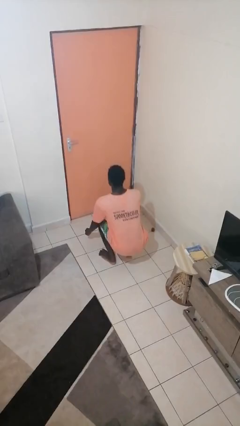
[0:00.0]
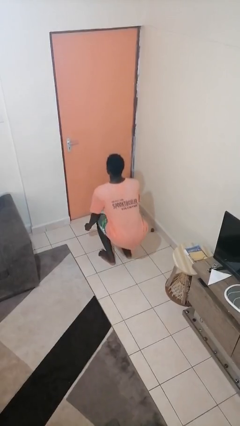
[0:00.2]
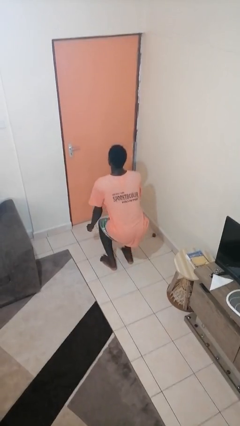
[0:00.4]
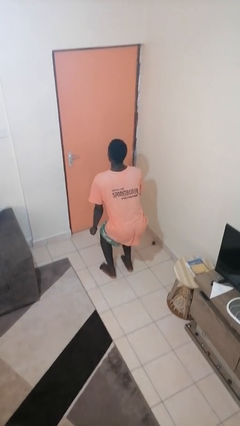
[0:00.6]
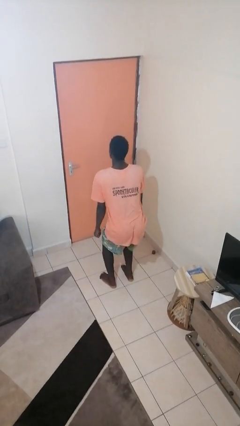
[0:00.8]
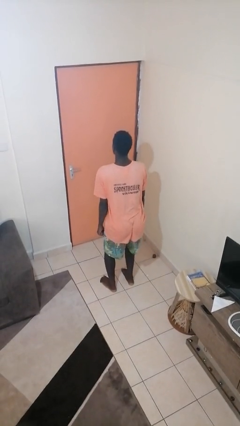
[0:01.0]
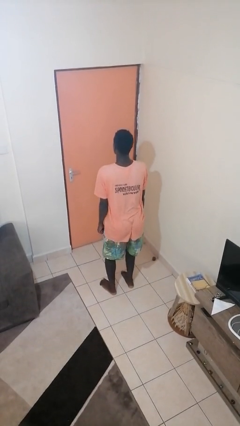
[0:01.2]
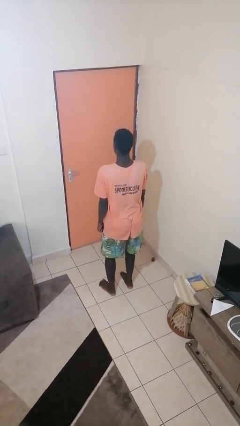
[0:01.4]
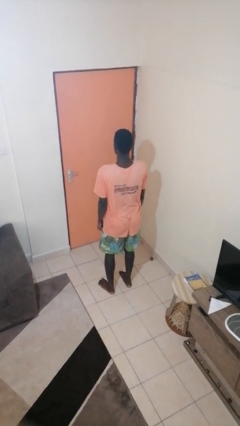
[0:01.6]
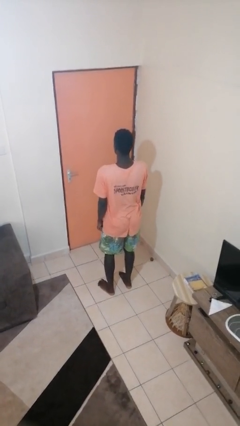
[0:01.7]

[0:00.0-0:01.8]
person stands up

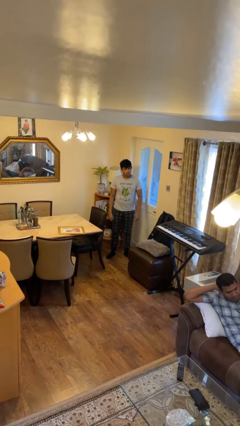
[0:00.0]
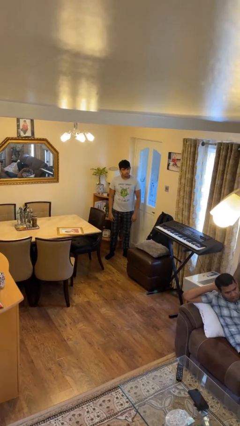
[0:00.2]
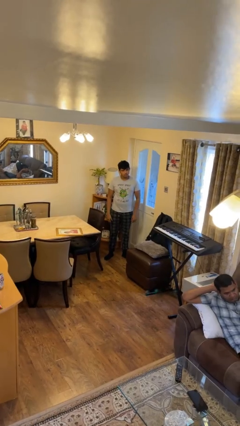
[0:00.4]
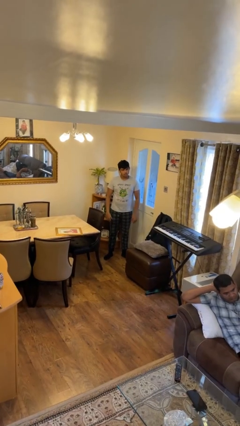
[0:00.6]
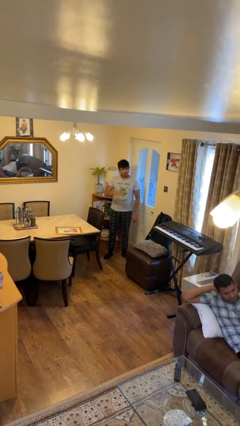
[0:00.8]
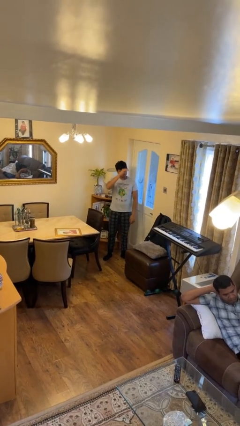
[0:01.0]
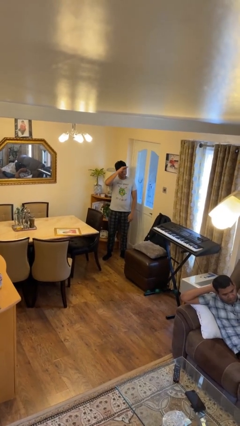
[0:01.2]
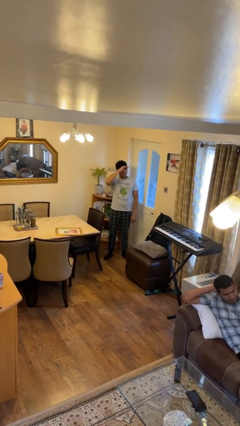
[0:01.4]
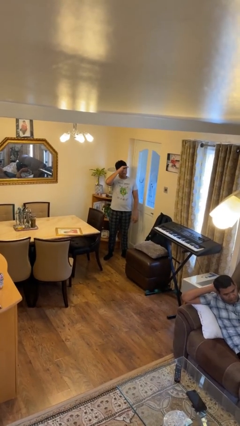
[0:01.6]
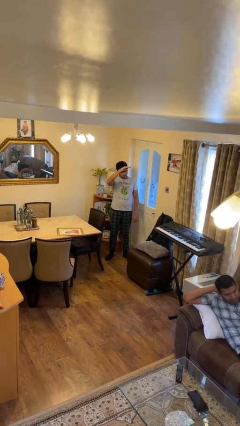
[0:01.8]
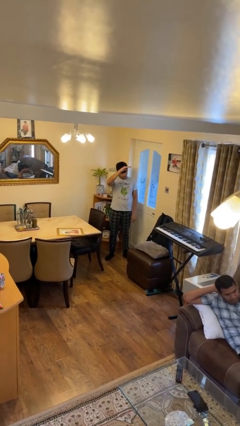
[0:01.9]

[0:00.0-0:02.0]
person salutes

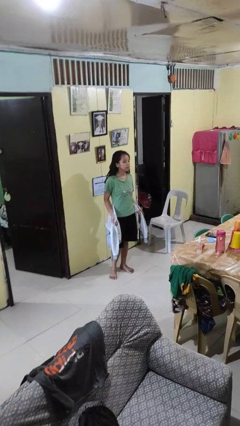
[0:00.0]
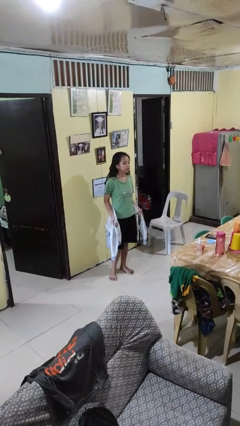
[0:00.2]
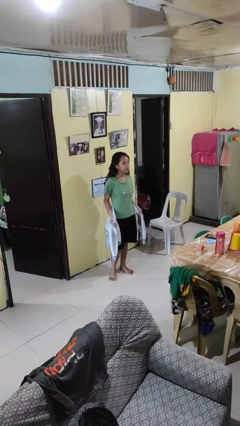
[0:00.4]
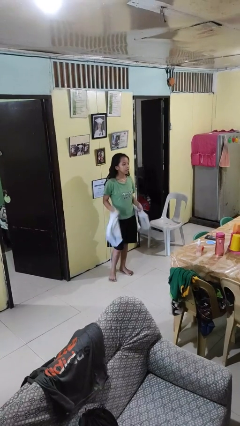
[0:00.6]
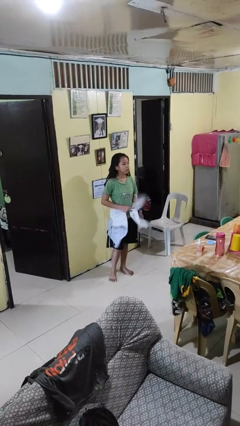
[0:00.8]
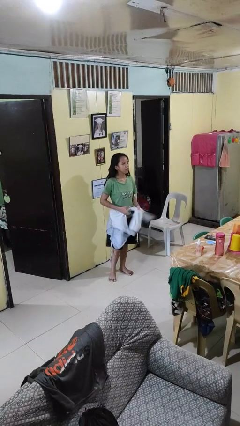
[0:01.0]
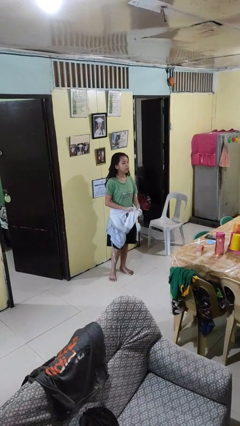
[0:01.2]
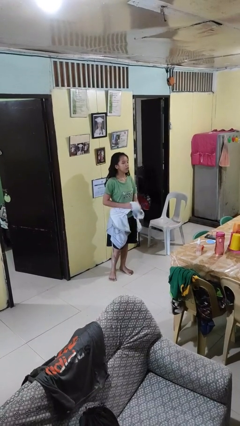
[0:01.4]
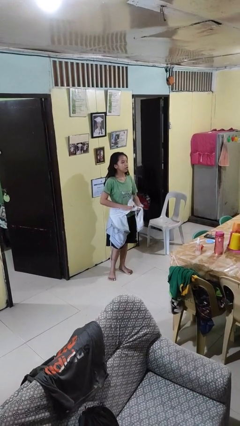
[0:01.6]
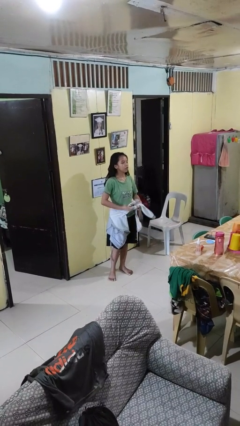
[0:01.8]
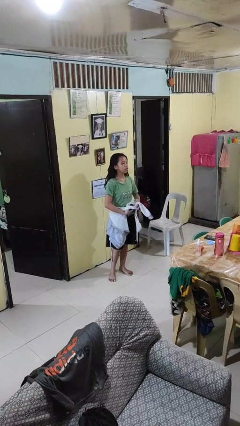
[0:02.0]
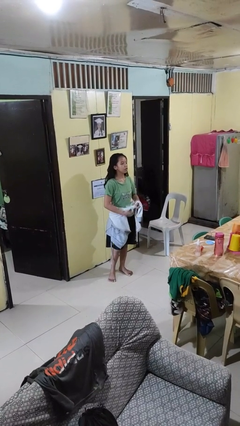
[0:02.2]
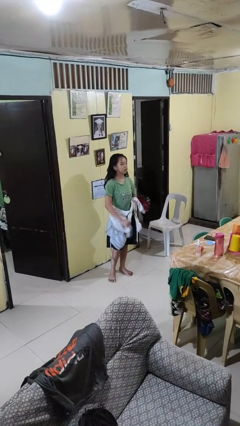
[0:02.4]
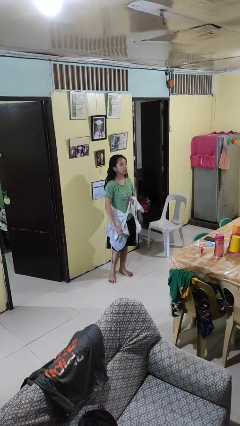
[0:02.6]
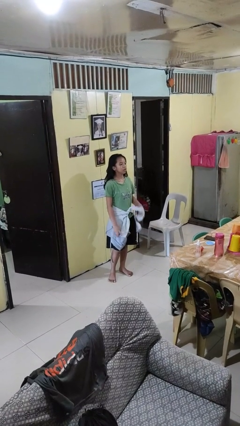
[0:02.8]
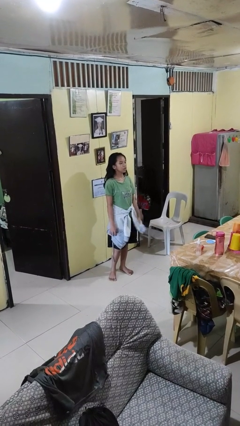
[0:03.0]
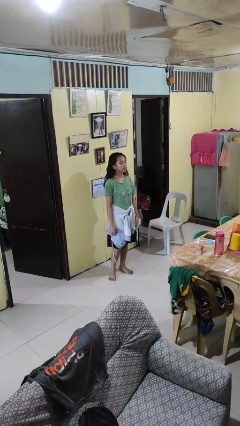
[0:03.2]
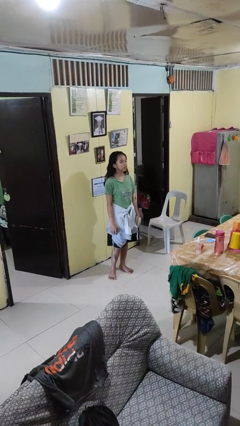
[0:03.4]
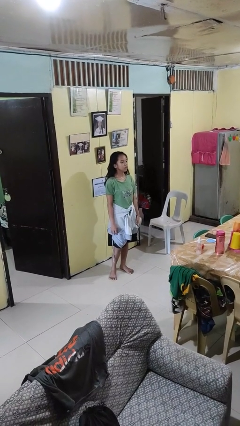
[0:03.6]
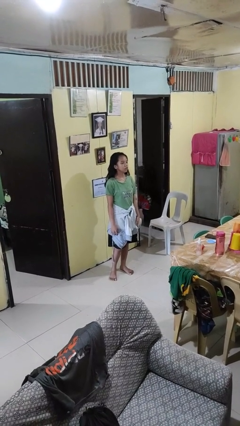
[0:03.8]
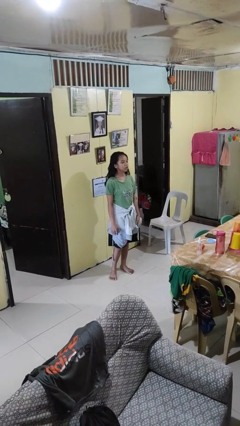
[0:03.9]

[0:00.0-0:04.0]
person ties jacket around waist

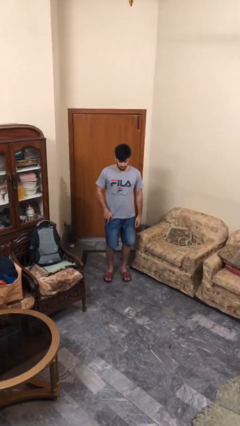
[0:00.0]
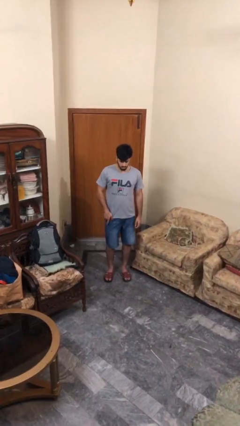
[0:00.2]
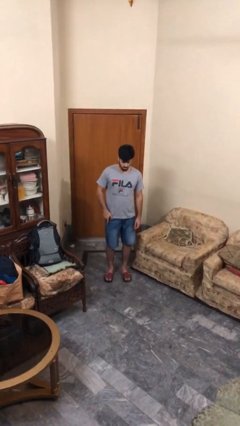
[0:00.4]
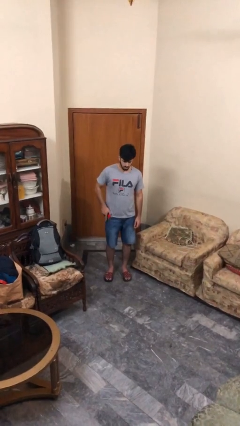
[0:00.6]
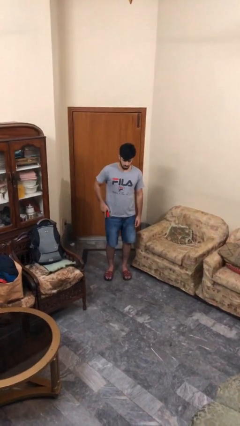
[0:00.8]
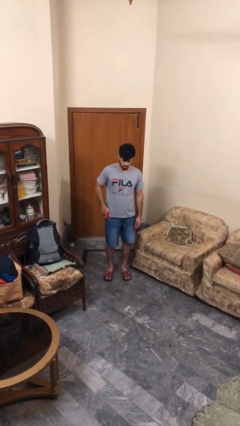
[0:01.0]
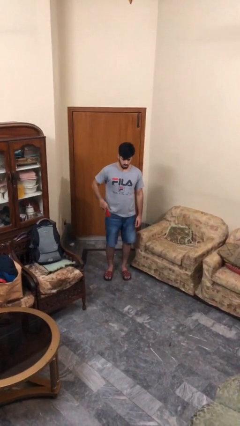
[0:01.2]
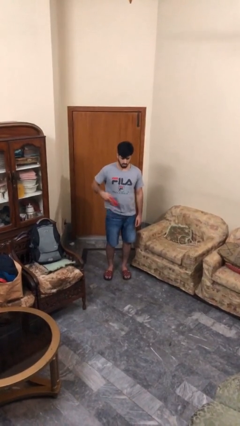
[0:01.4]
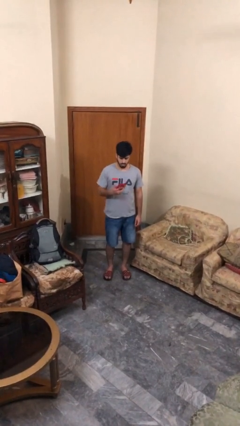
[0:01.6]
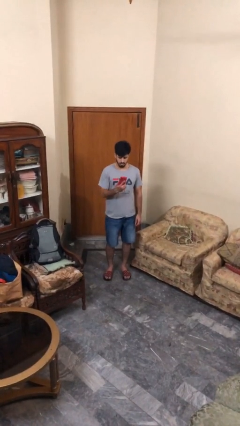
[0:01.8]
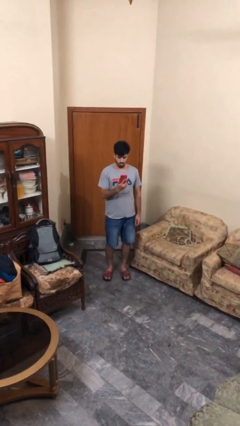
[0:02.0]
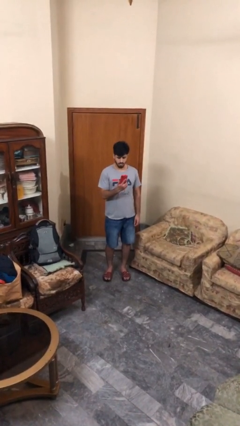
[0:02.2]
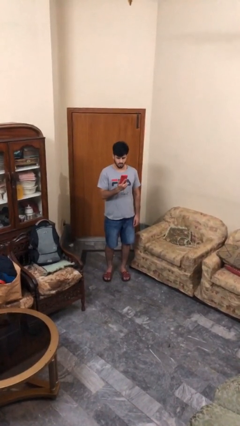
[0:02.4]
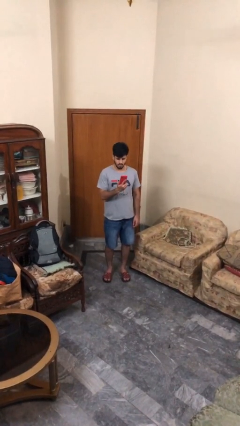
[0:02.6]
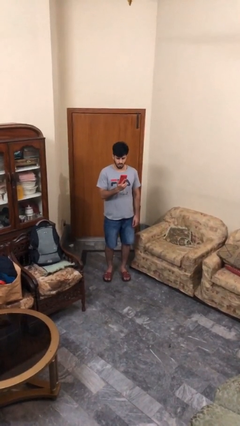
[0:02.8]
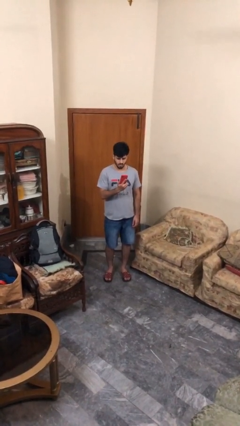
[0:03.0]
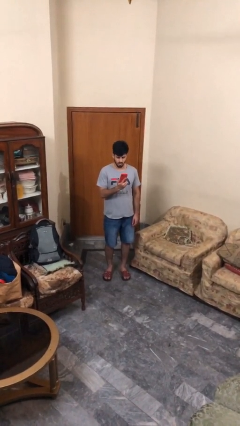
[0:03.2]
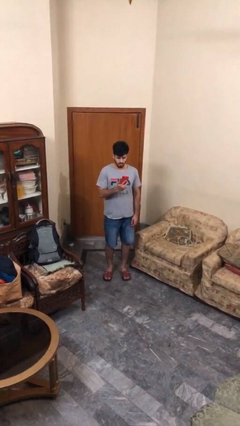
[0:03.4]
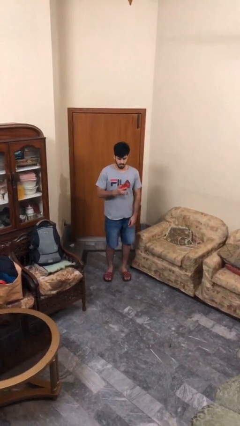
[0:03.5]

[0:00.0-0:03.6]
person takes phone from pocket

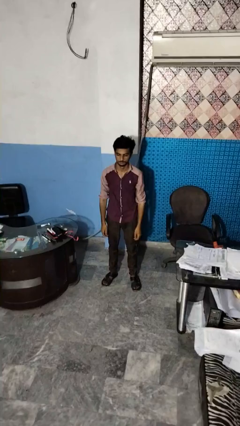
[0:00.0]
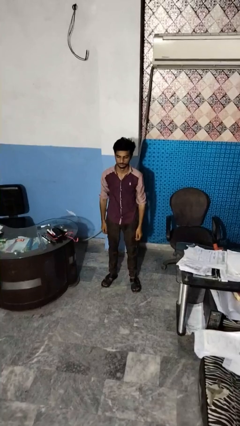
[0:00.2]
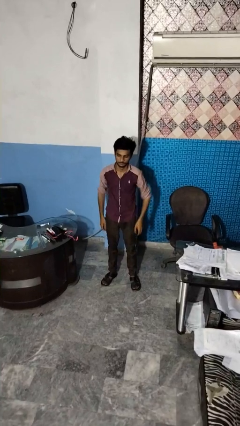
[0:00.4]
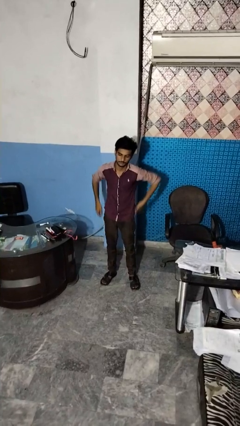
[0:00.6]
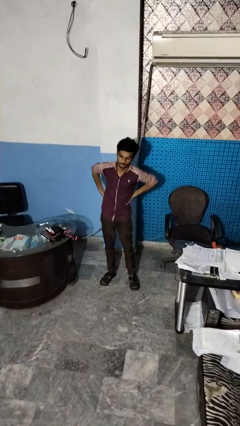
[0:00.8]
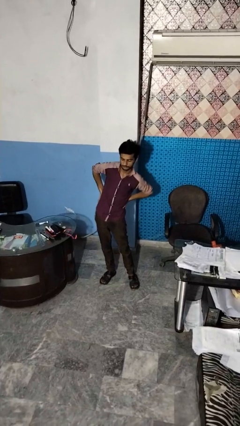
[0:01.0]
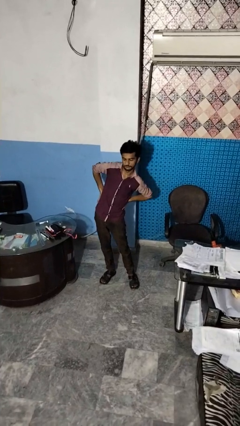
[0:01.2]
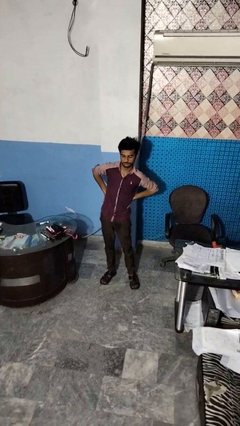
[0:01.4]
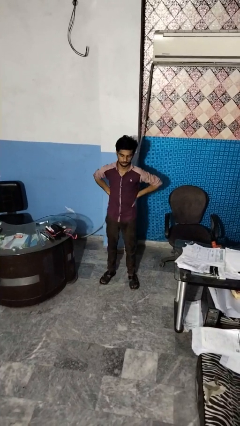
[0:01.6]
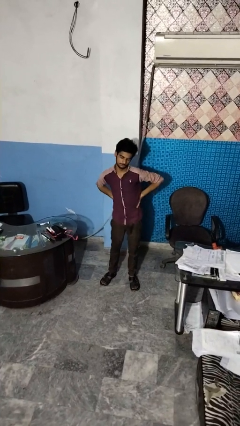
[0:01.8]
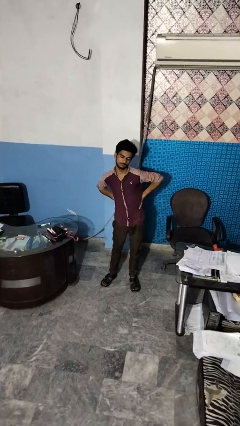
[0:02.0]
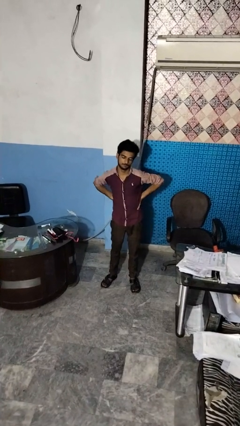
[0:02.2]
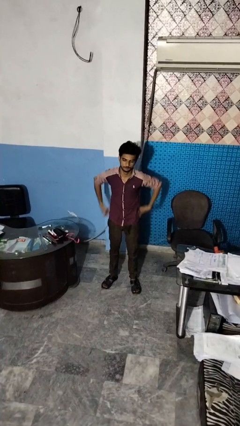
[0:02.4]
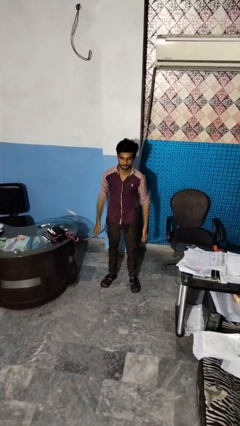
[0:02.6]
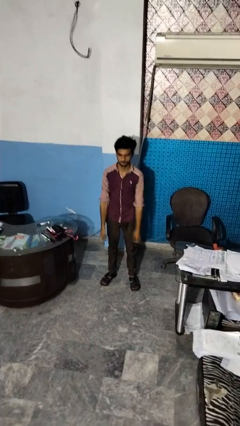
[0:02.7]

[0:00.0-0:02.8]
person stretches back

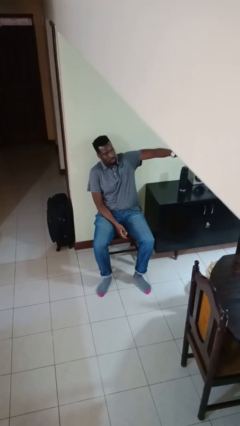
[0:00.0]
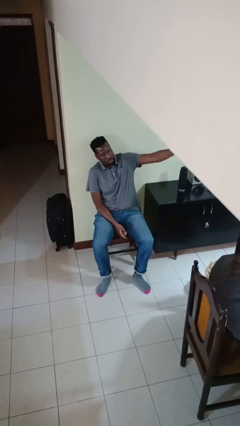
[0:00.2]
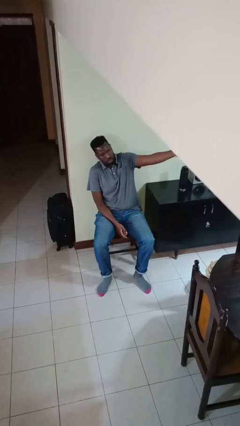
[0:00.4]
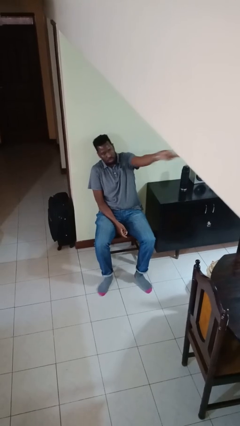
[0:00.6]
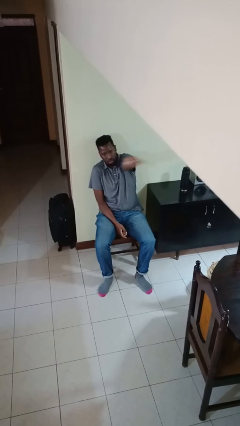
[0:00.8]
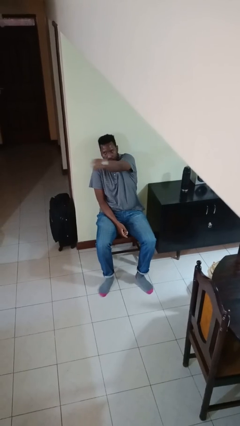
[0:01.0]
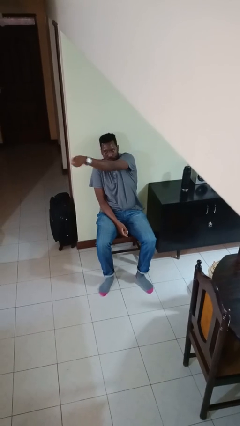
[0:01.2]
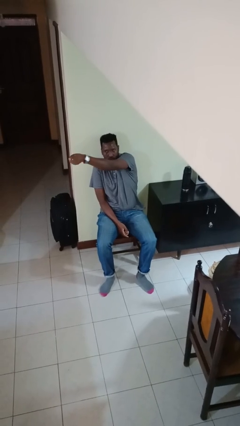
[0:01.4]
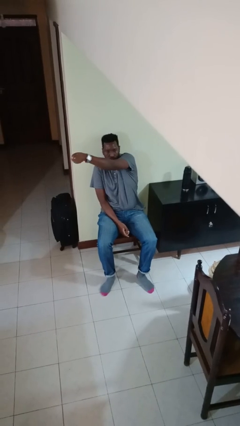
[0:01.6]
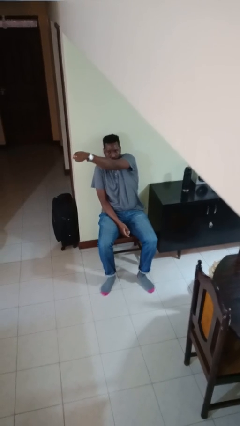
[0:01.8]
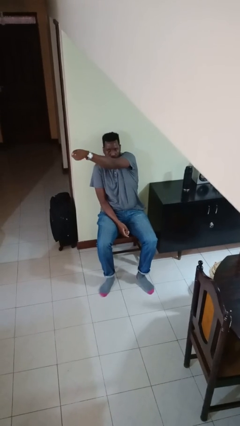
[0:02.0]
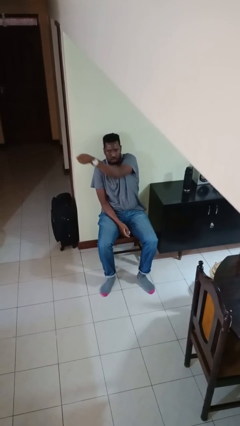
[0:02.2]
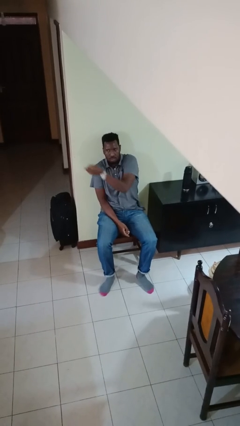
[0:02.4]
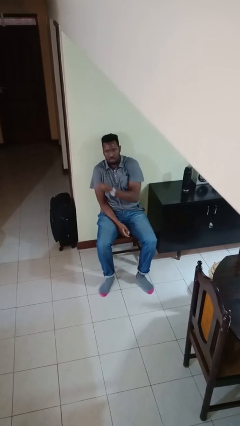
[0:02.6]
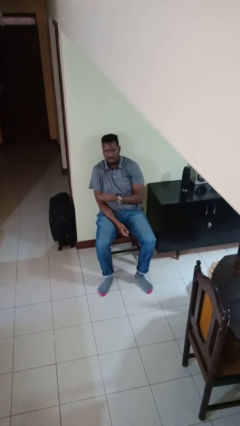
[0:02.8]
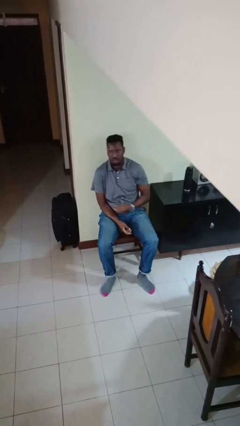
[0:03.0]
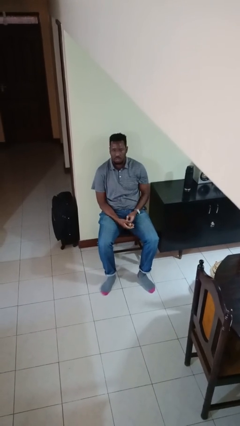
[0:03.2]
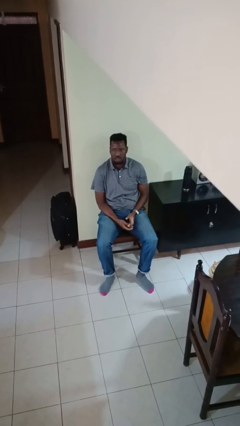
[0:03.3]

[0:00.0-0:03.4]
person gestures swipe right
